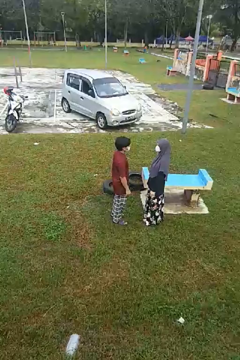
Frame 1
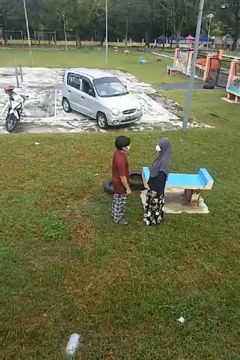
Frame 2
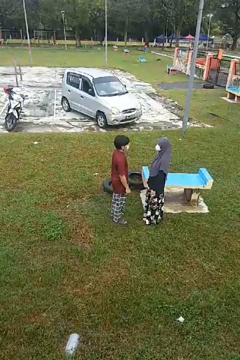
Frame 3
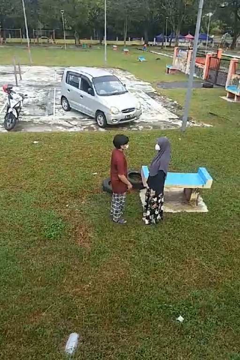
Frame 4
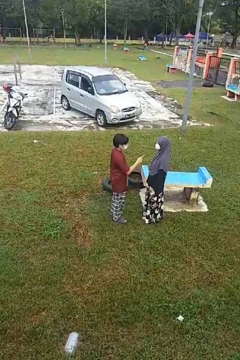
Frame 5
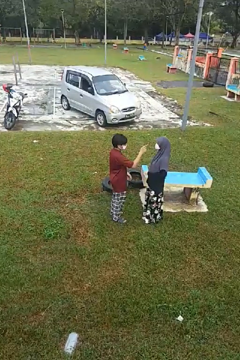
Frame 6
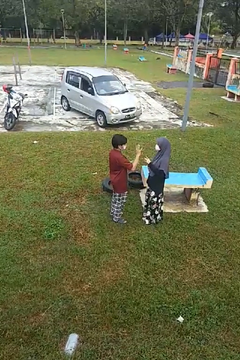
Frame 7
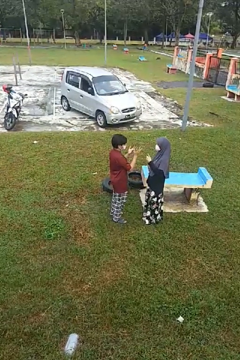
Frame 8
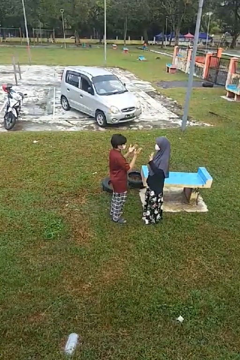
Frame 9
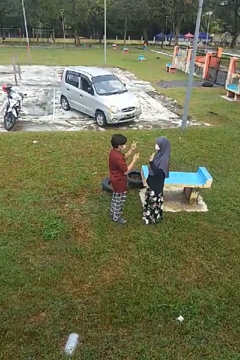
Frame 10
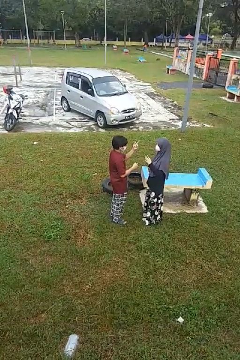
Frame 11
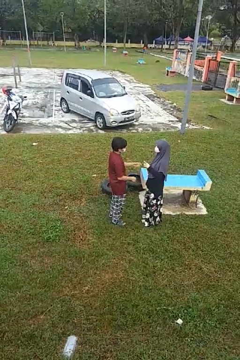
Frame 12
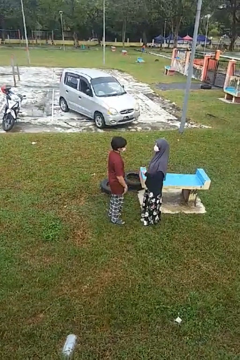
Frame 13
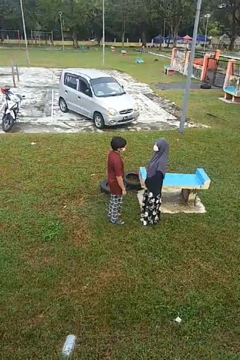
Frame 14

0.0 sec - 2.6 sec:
person talks to person

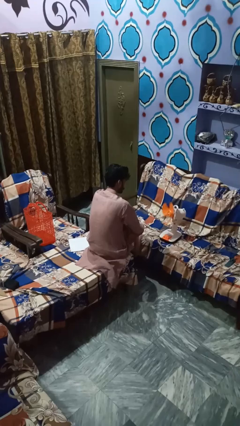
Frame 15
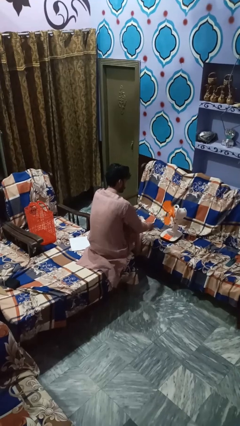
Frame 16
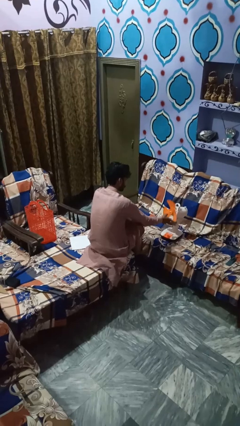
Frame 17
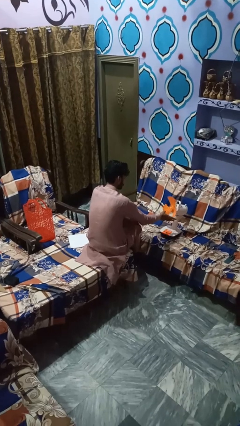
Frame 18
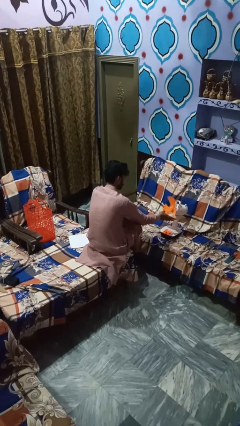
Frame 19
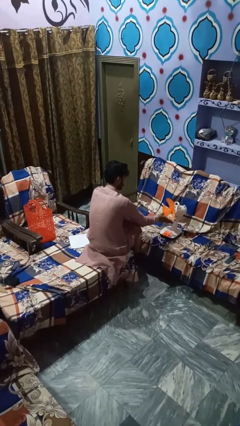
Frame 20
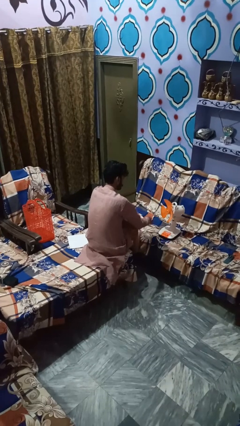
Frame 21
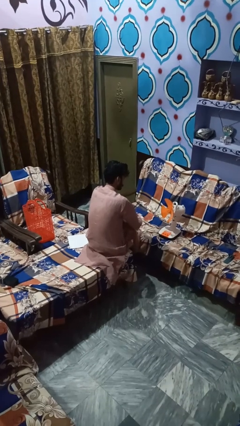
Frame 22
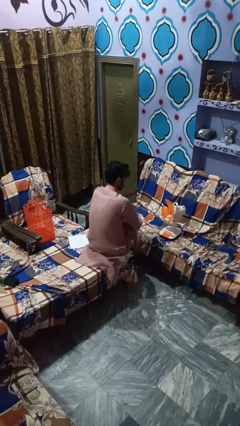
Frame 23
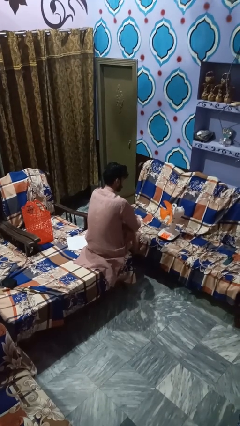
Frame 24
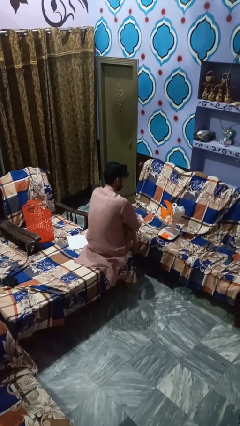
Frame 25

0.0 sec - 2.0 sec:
person turns off fan

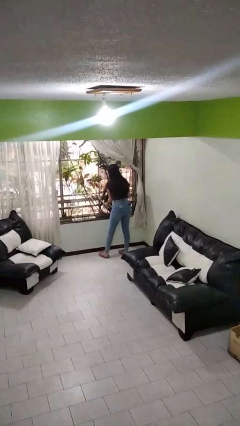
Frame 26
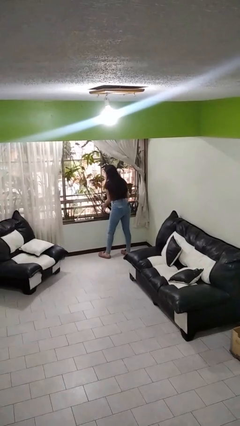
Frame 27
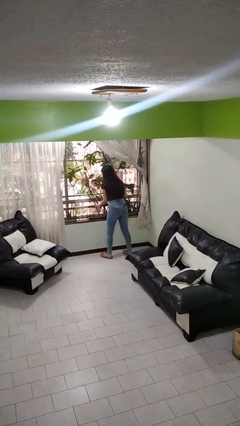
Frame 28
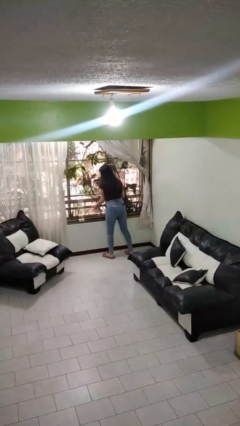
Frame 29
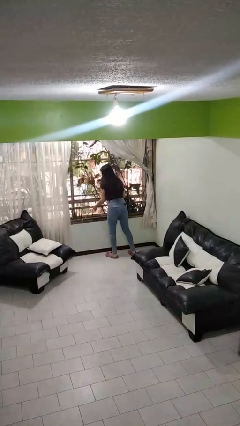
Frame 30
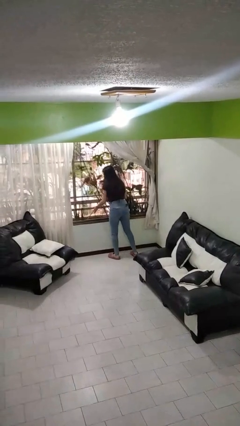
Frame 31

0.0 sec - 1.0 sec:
person closes home window

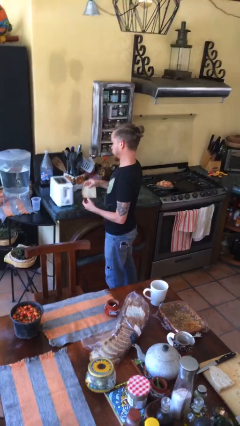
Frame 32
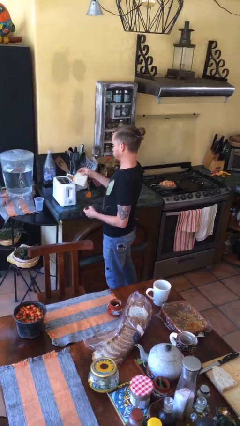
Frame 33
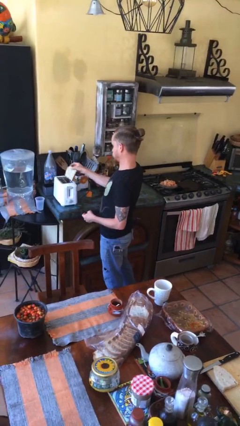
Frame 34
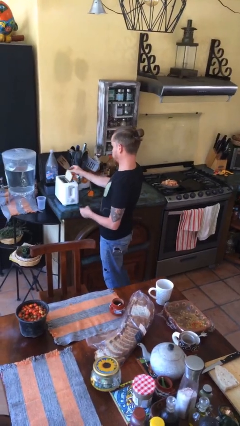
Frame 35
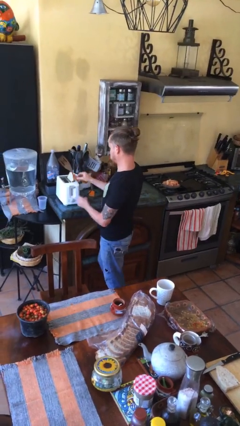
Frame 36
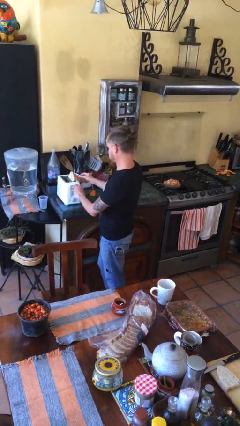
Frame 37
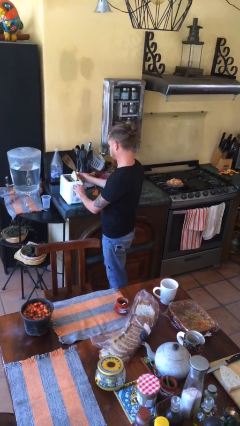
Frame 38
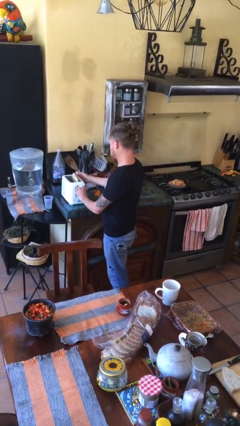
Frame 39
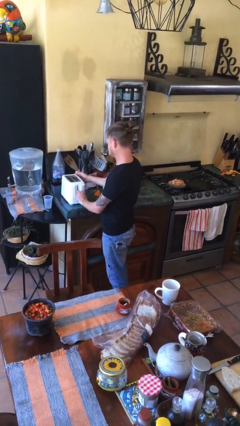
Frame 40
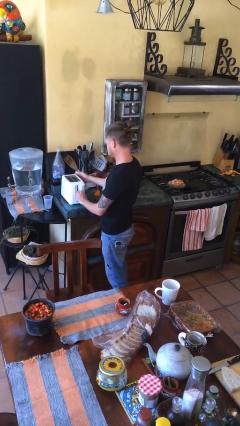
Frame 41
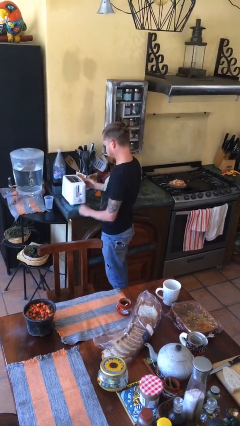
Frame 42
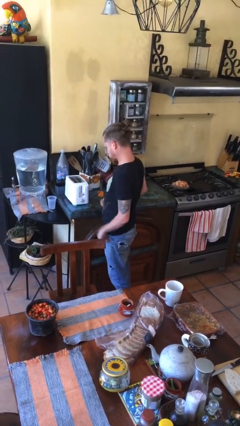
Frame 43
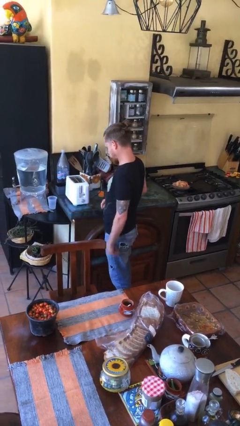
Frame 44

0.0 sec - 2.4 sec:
person puts object into toaster

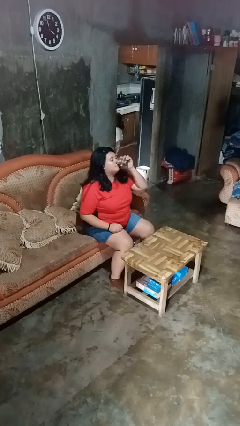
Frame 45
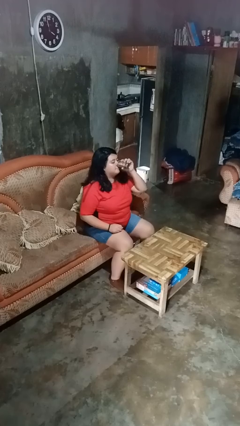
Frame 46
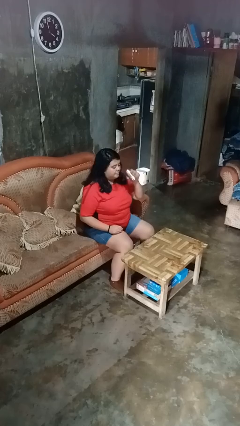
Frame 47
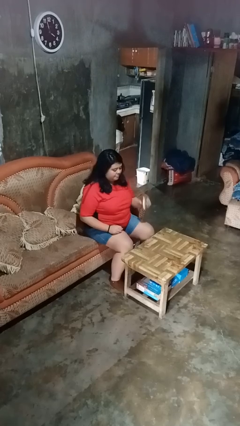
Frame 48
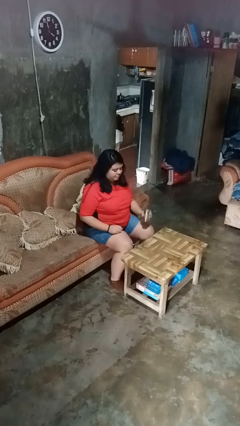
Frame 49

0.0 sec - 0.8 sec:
person drinks from beverage can

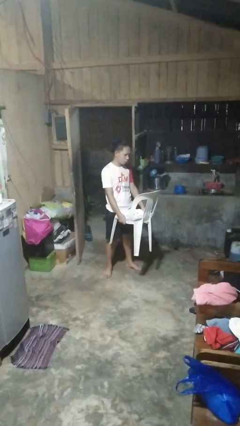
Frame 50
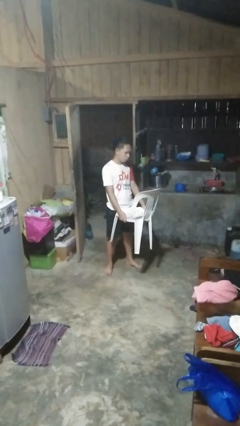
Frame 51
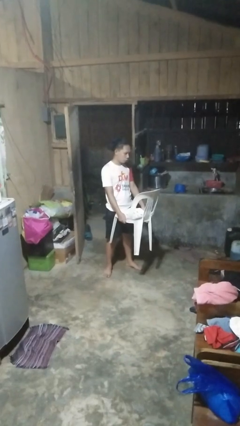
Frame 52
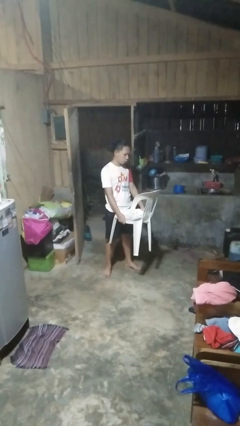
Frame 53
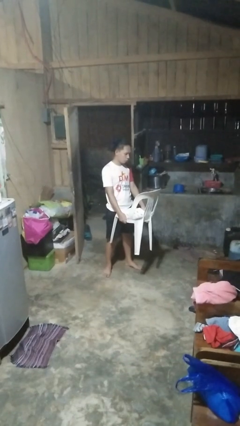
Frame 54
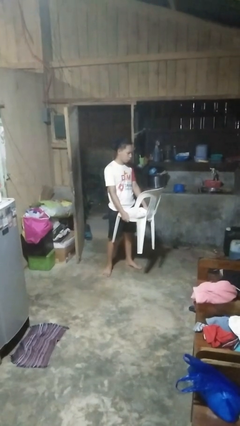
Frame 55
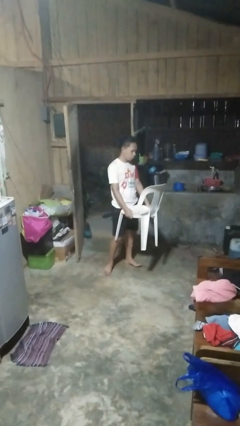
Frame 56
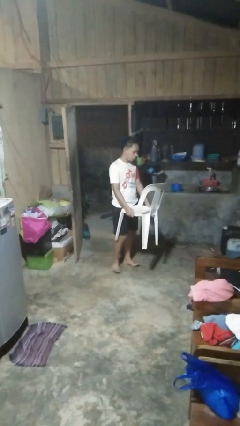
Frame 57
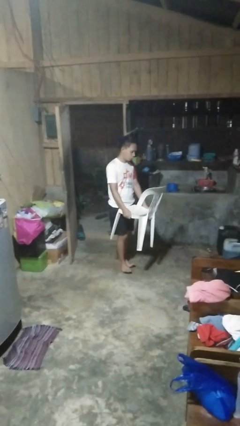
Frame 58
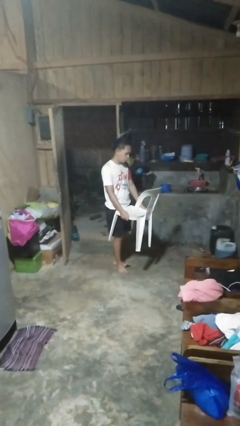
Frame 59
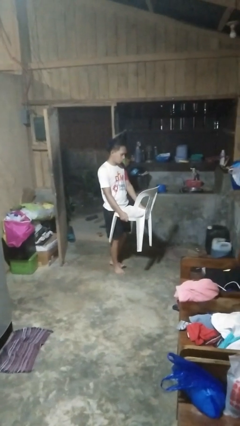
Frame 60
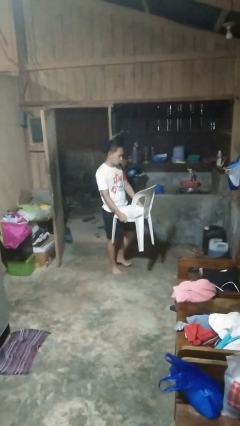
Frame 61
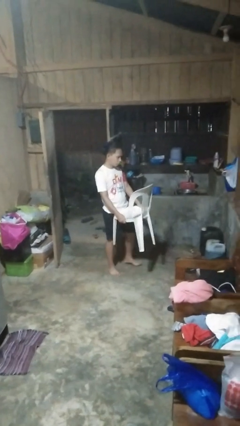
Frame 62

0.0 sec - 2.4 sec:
person carries furniture

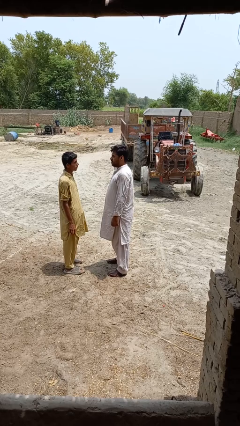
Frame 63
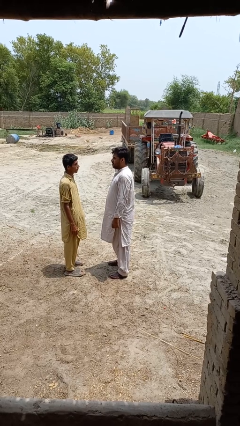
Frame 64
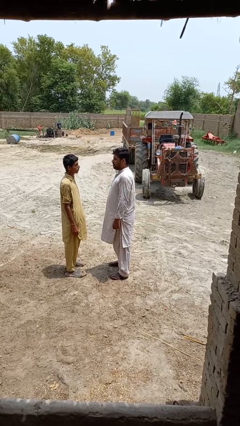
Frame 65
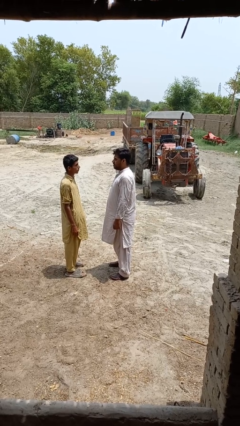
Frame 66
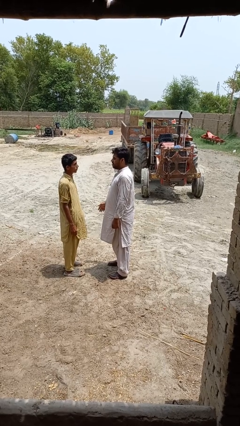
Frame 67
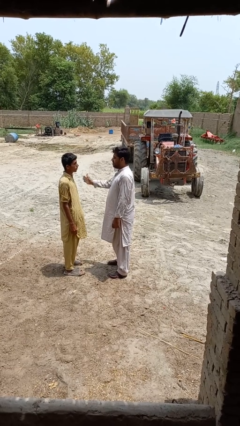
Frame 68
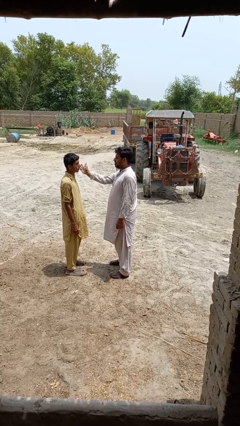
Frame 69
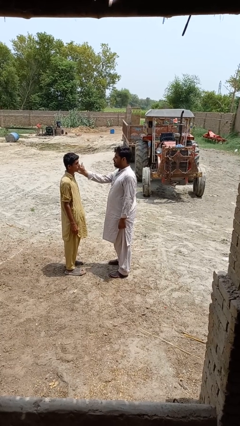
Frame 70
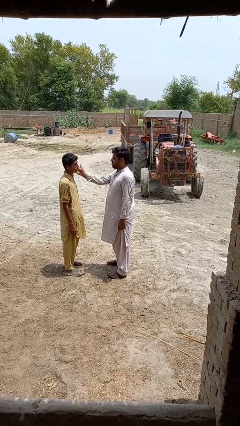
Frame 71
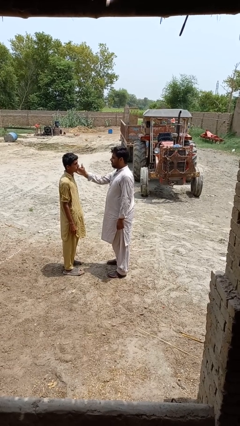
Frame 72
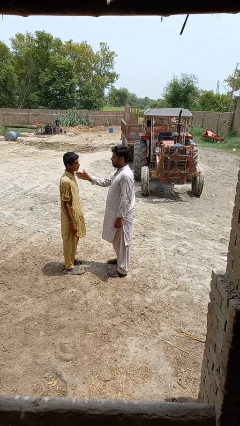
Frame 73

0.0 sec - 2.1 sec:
person touches face of person

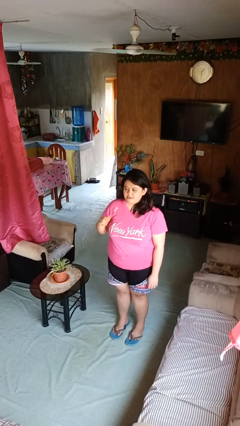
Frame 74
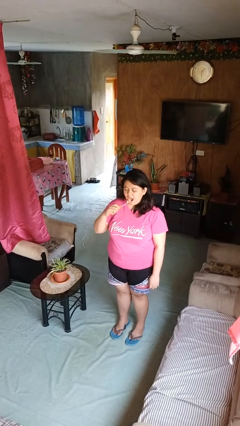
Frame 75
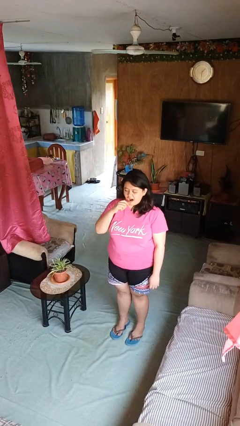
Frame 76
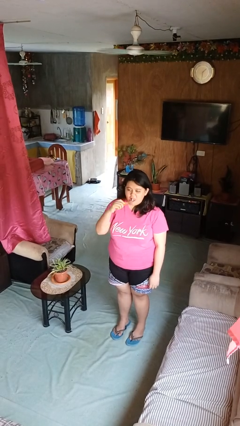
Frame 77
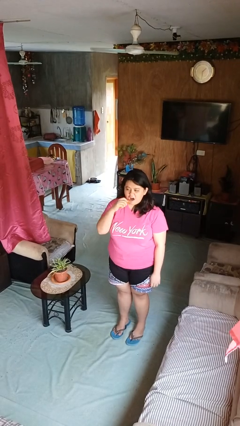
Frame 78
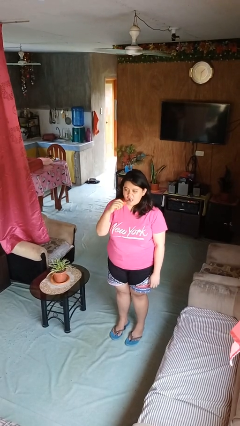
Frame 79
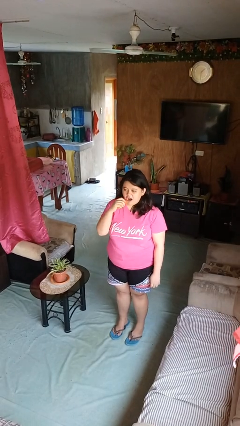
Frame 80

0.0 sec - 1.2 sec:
person brushes teeth

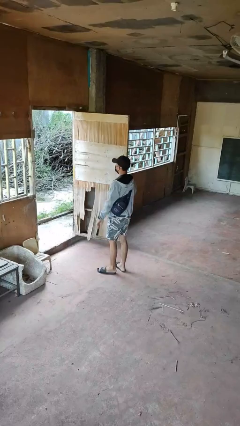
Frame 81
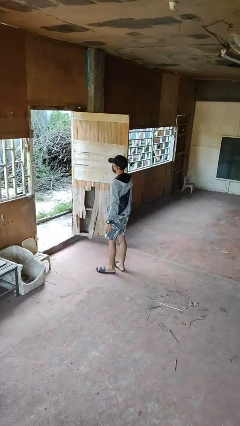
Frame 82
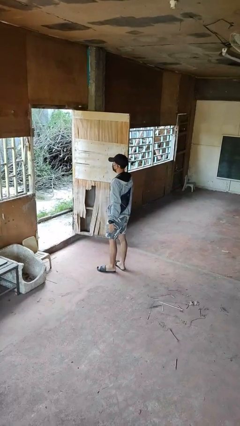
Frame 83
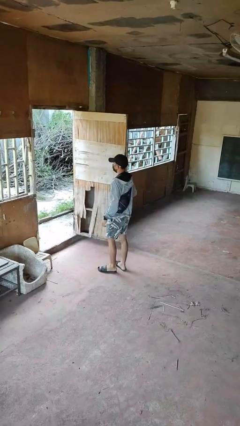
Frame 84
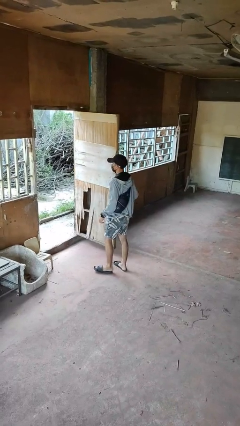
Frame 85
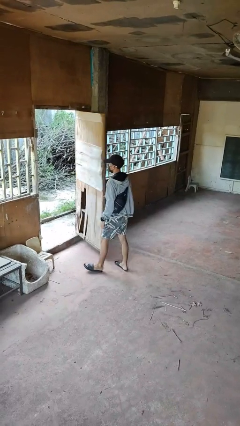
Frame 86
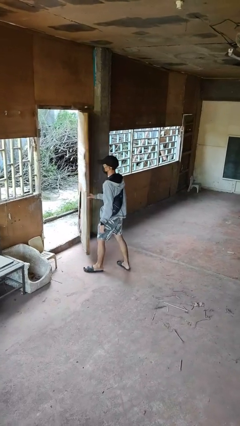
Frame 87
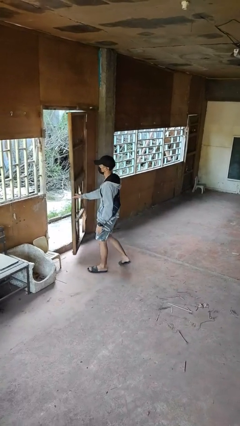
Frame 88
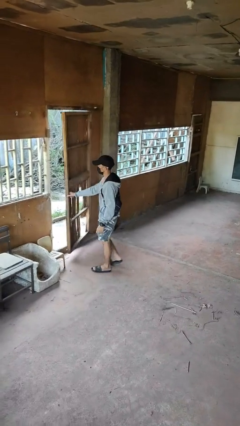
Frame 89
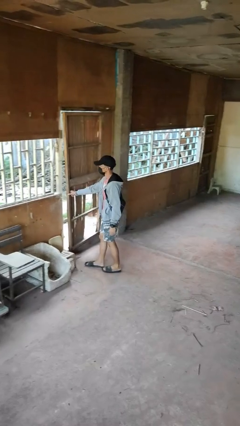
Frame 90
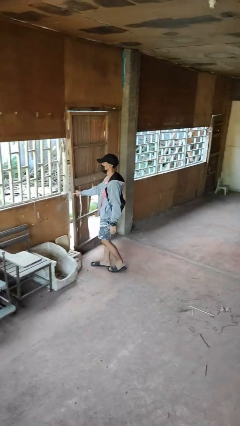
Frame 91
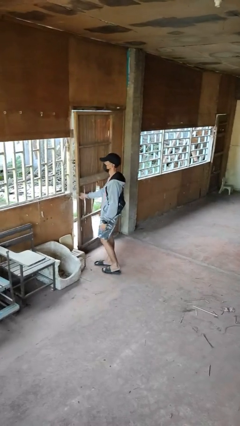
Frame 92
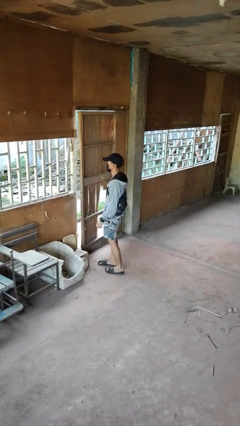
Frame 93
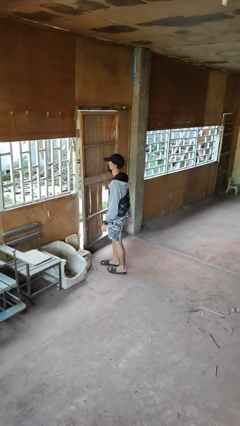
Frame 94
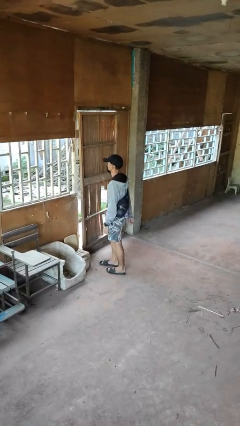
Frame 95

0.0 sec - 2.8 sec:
person closes facility door
